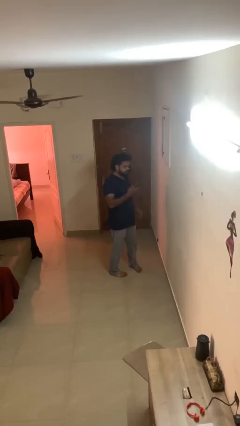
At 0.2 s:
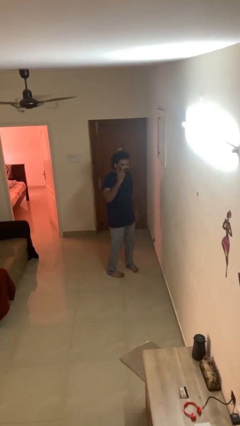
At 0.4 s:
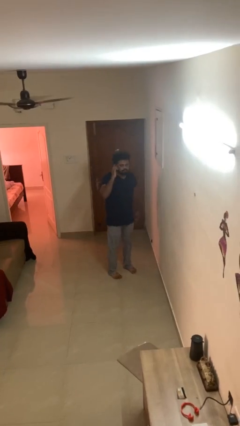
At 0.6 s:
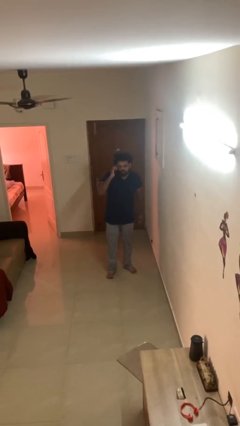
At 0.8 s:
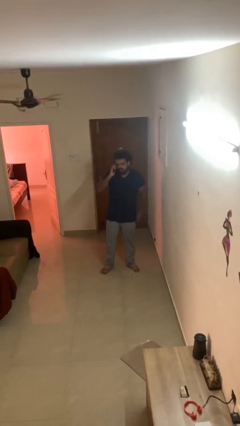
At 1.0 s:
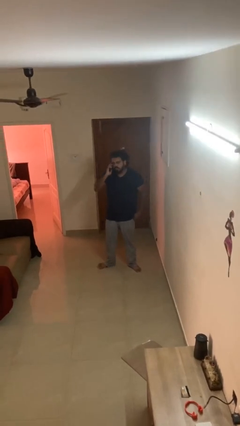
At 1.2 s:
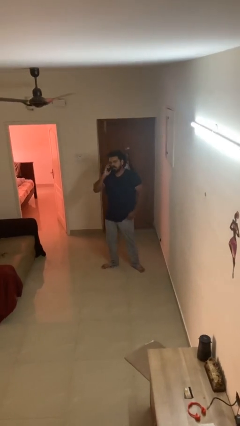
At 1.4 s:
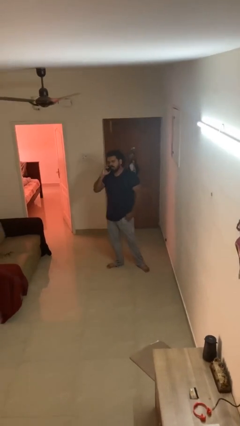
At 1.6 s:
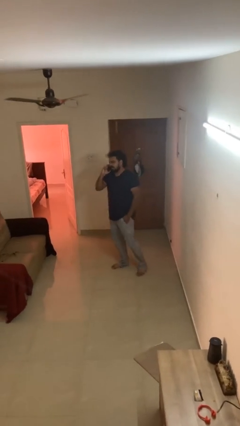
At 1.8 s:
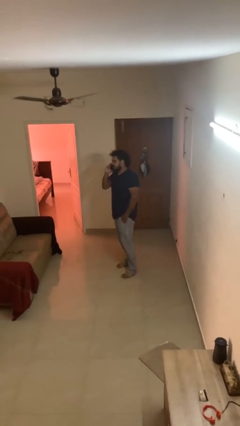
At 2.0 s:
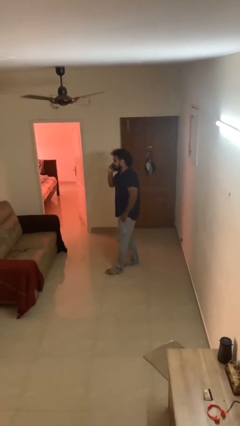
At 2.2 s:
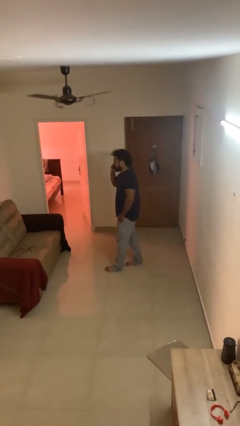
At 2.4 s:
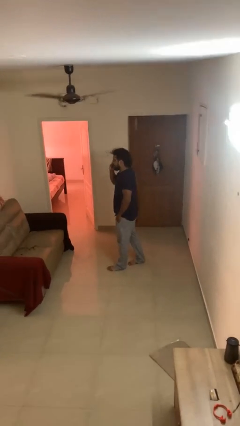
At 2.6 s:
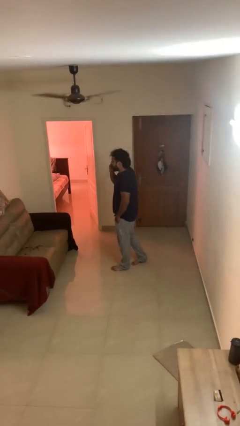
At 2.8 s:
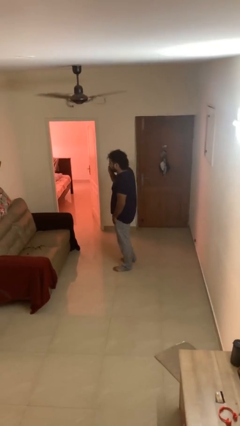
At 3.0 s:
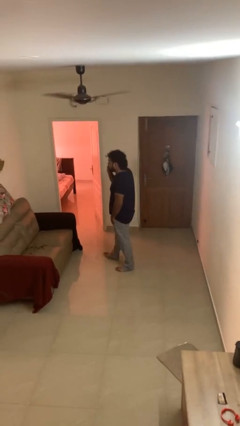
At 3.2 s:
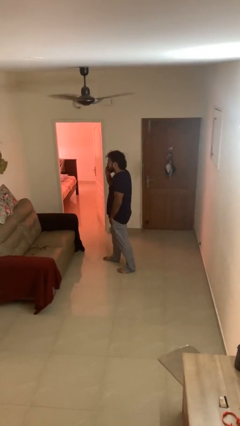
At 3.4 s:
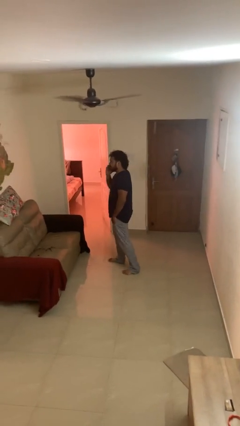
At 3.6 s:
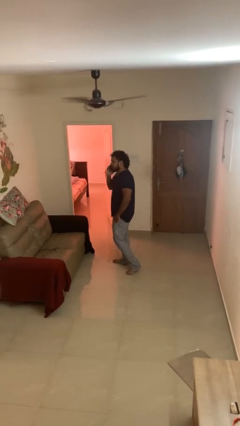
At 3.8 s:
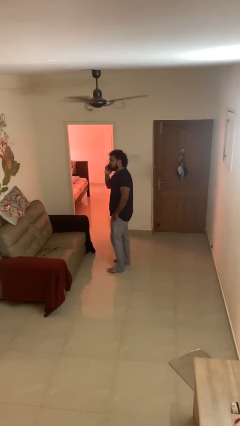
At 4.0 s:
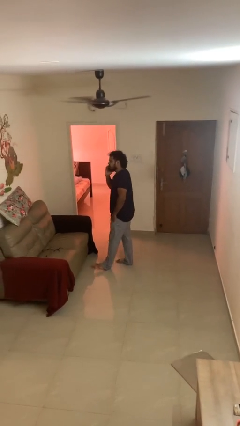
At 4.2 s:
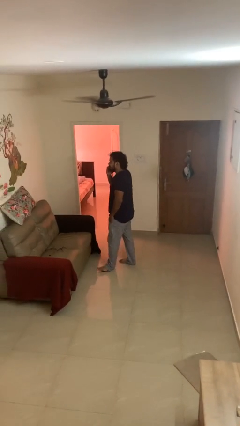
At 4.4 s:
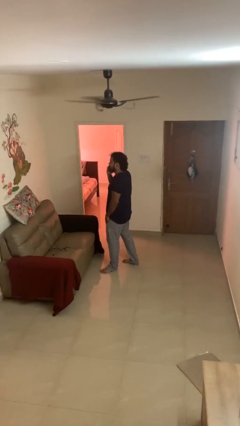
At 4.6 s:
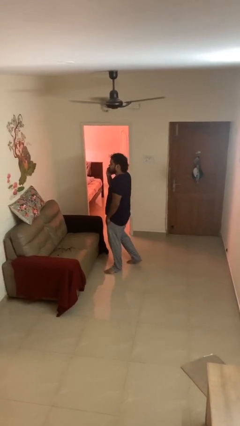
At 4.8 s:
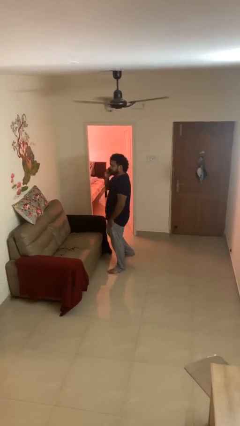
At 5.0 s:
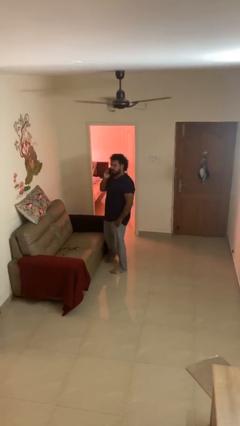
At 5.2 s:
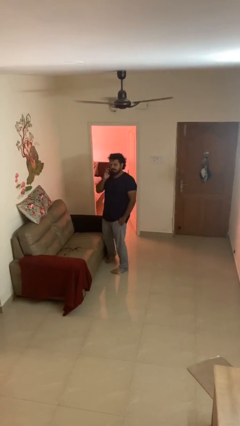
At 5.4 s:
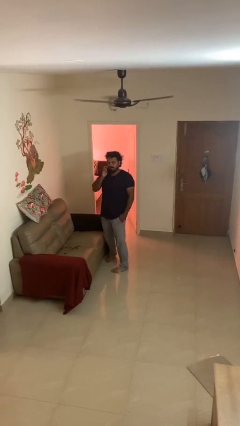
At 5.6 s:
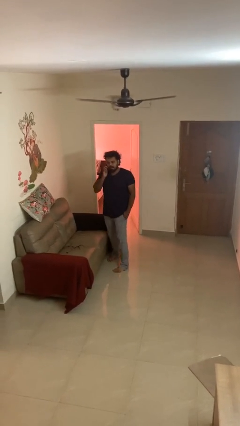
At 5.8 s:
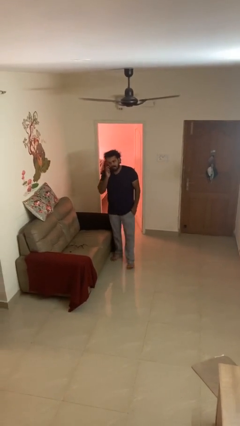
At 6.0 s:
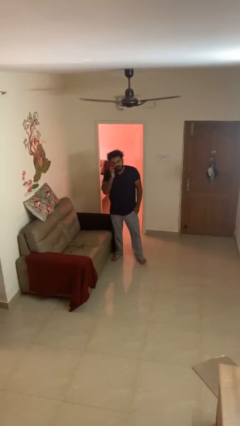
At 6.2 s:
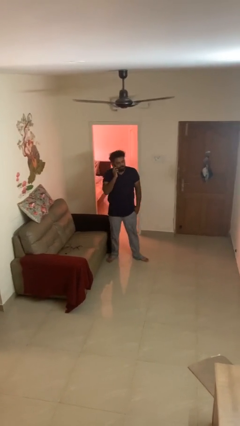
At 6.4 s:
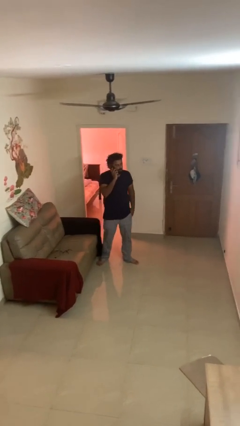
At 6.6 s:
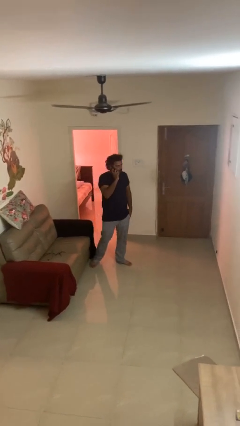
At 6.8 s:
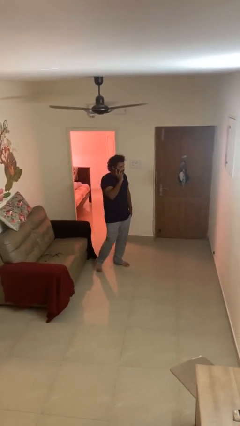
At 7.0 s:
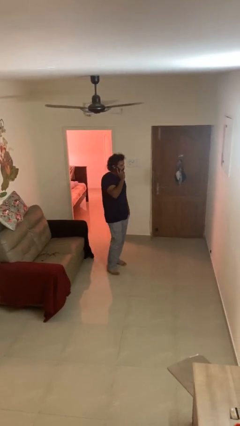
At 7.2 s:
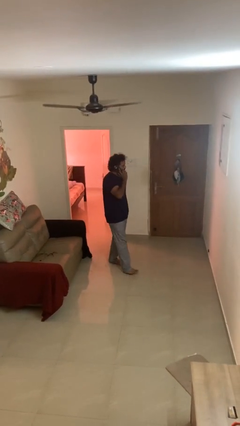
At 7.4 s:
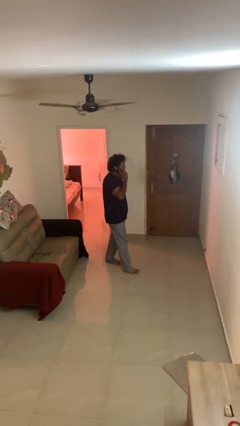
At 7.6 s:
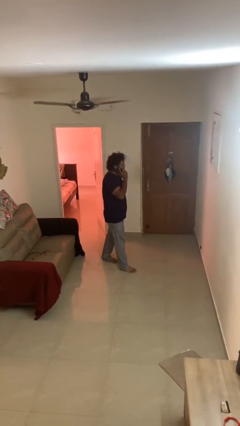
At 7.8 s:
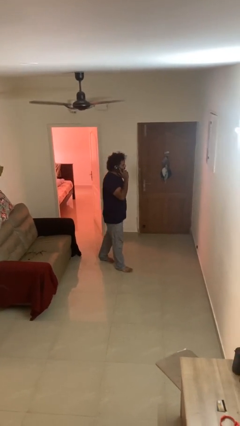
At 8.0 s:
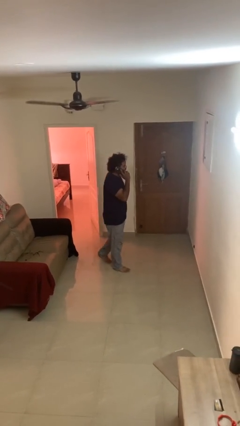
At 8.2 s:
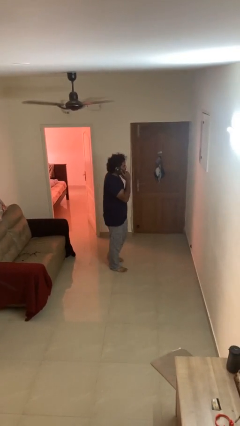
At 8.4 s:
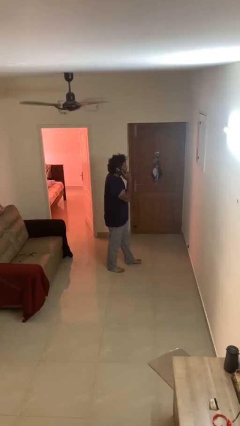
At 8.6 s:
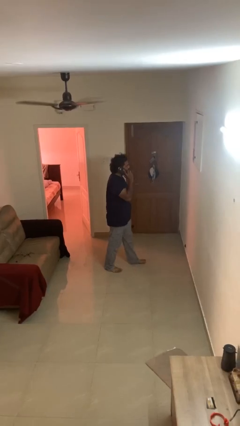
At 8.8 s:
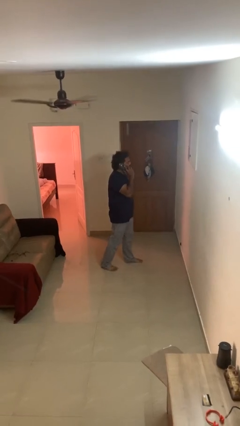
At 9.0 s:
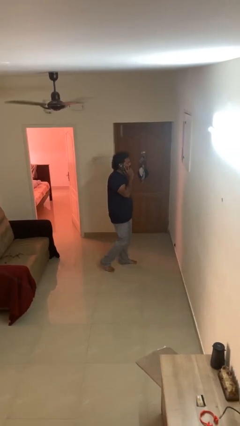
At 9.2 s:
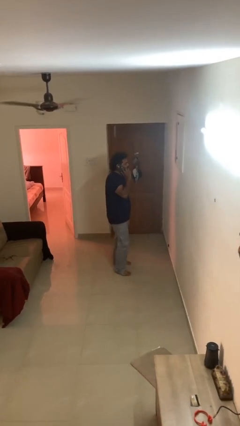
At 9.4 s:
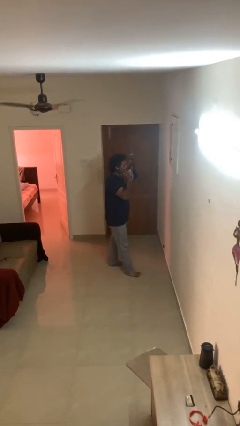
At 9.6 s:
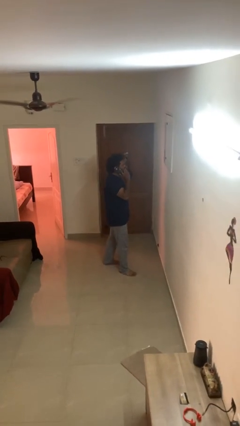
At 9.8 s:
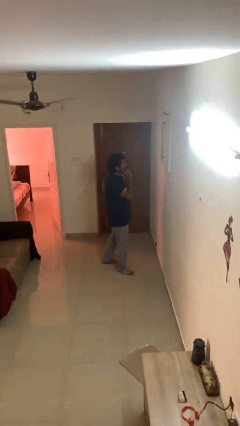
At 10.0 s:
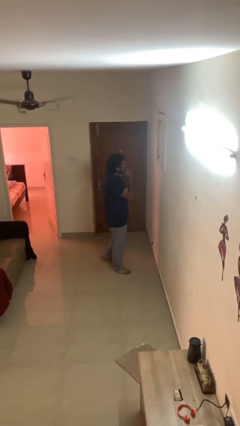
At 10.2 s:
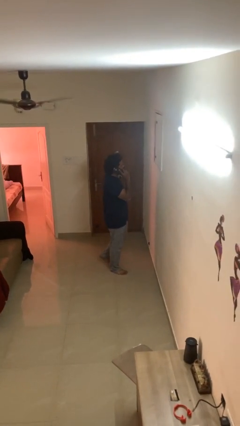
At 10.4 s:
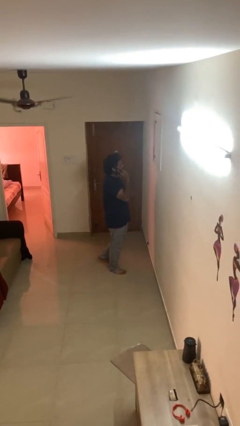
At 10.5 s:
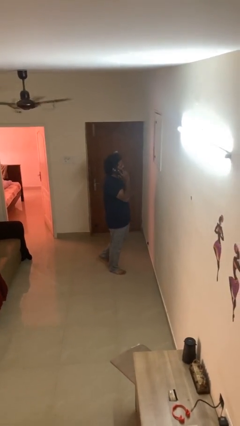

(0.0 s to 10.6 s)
person talks on phone

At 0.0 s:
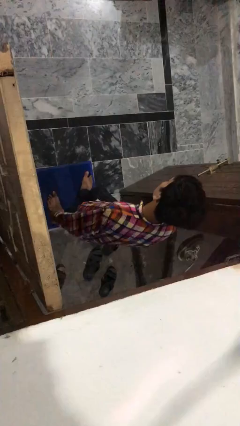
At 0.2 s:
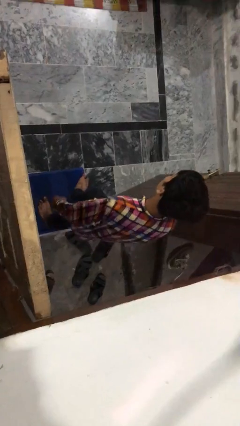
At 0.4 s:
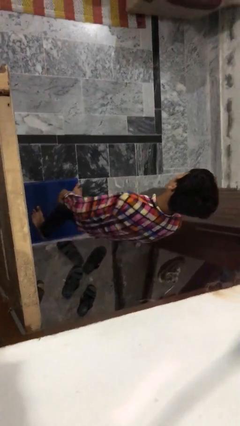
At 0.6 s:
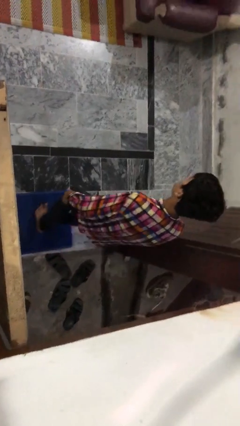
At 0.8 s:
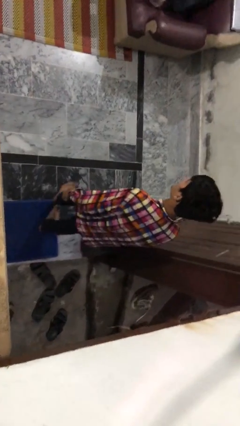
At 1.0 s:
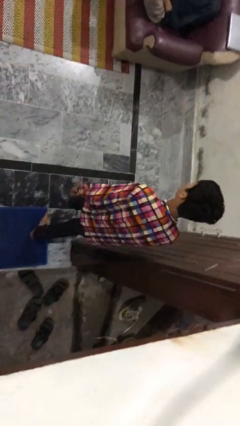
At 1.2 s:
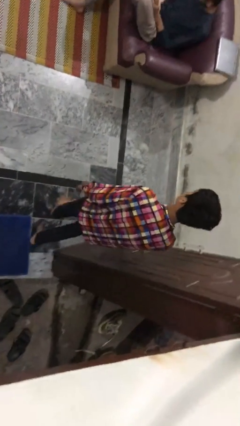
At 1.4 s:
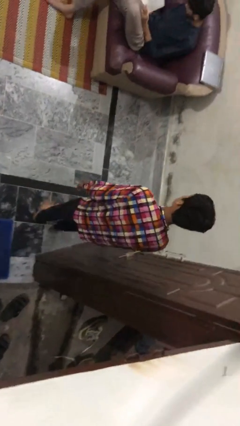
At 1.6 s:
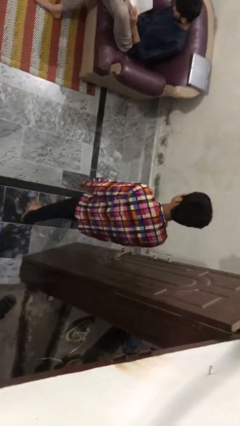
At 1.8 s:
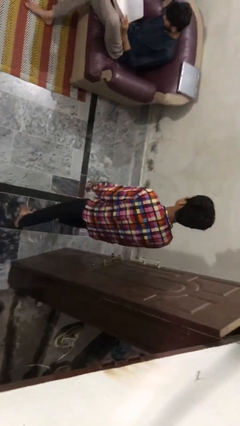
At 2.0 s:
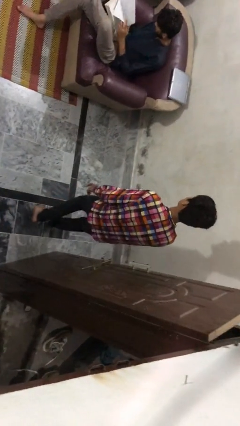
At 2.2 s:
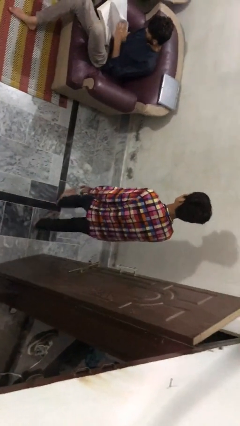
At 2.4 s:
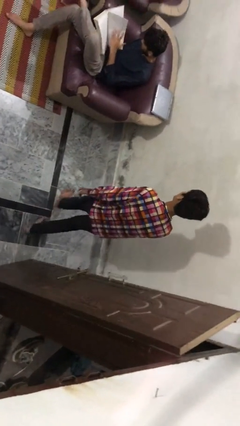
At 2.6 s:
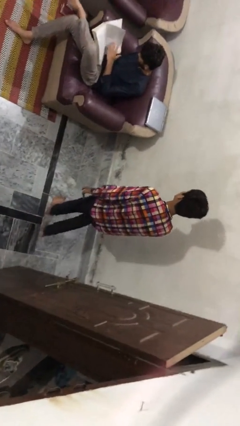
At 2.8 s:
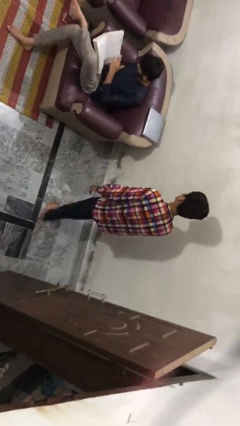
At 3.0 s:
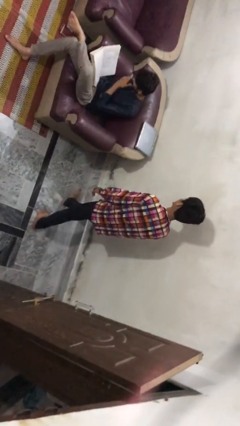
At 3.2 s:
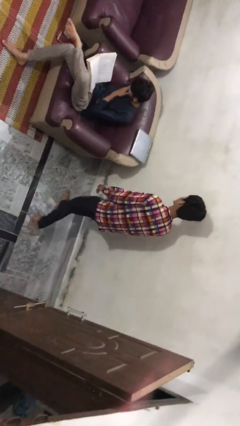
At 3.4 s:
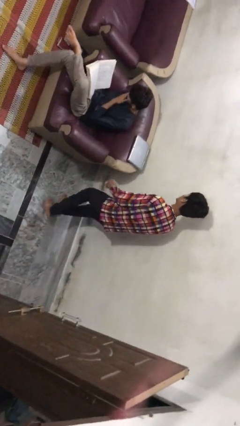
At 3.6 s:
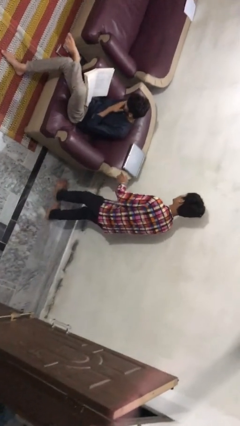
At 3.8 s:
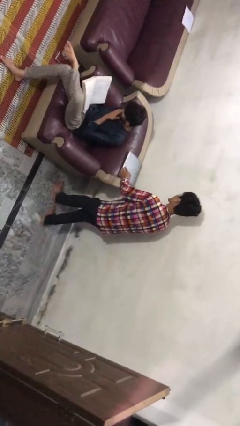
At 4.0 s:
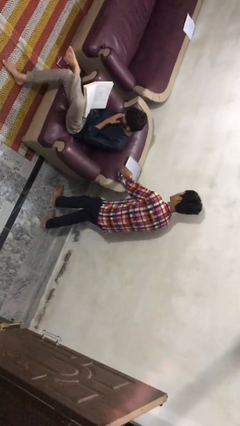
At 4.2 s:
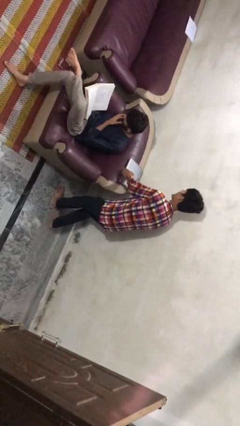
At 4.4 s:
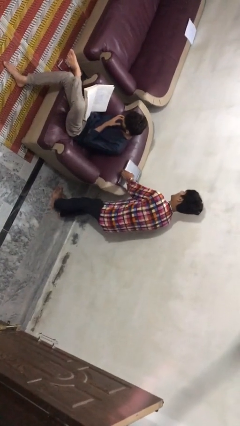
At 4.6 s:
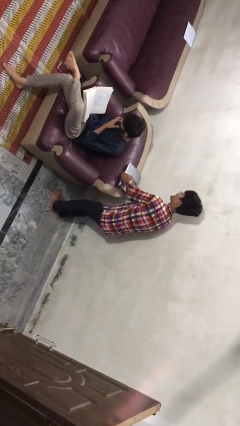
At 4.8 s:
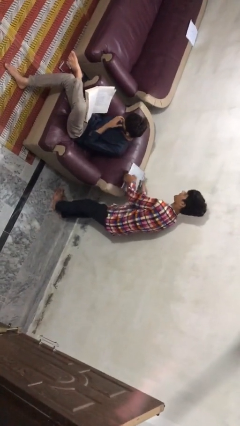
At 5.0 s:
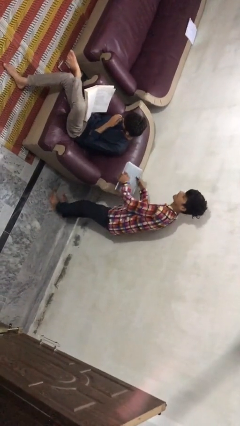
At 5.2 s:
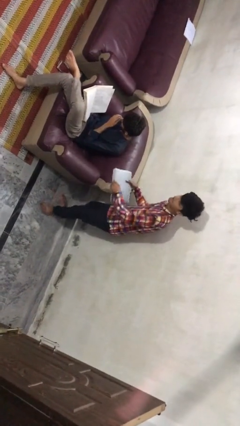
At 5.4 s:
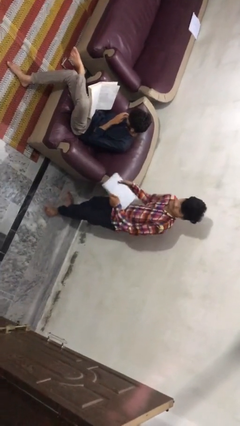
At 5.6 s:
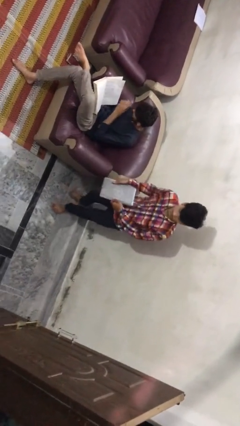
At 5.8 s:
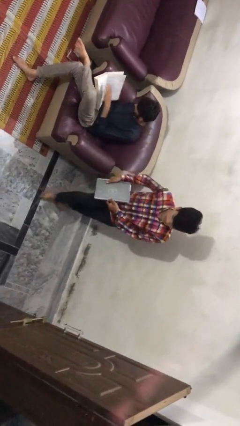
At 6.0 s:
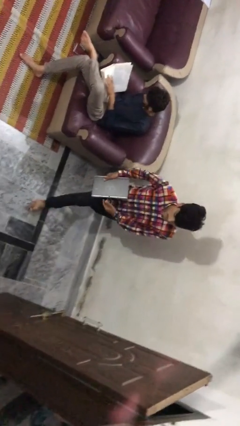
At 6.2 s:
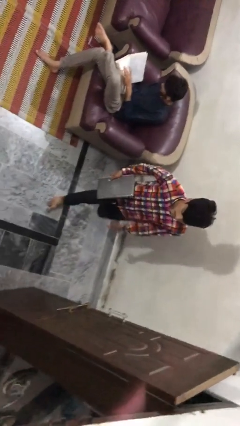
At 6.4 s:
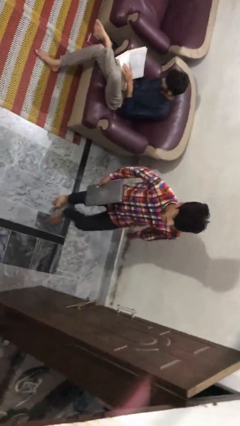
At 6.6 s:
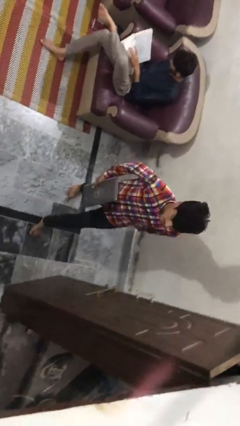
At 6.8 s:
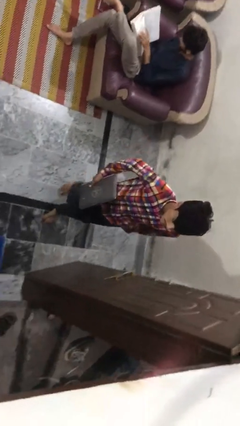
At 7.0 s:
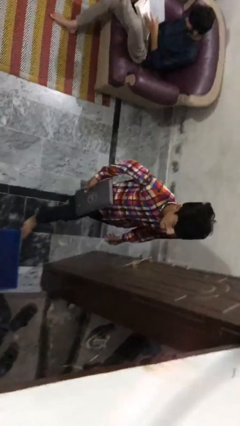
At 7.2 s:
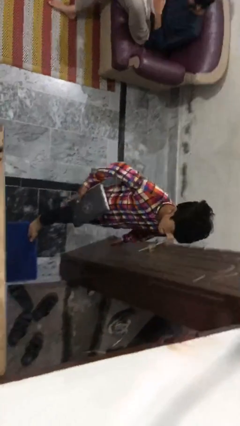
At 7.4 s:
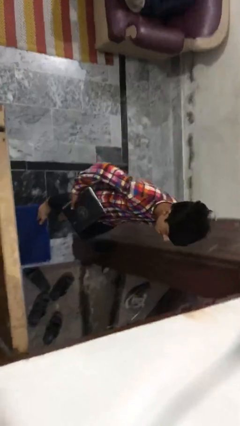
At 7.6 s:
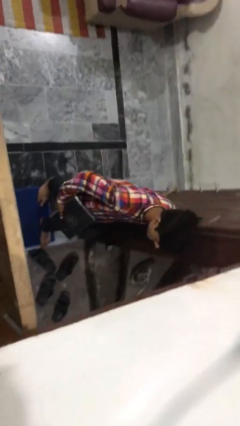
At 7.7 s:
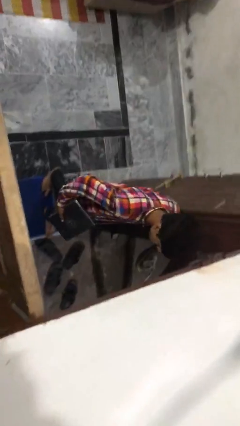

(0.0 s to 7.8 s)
person steals object from person
